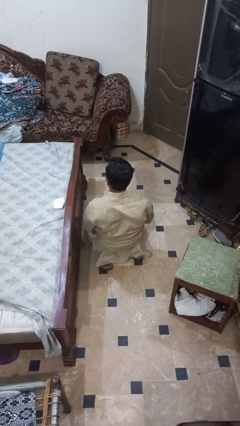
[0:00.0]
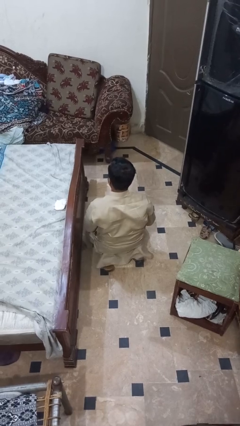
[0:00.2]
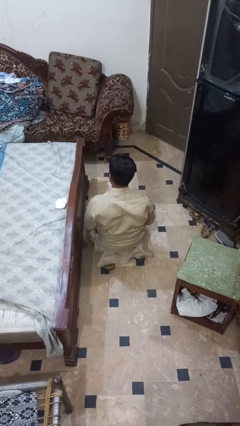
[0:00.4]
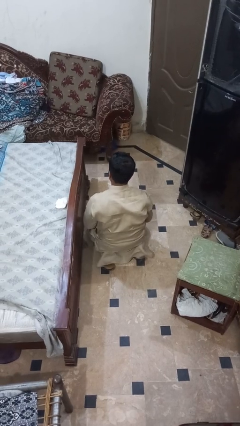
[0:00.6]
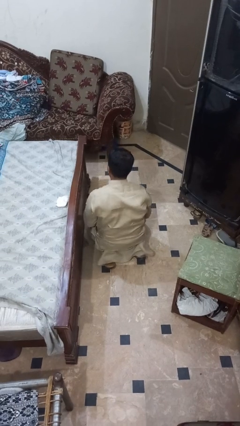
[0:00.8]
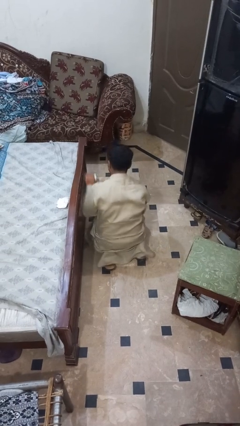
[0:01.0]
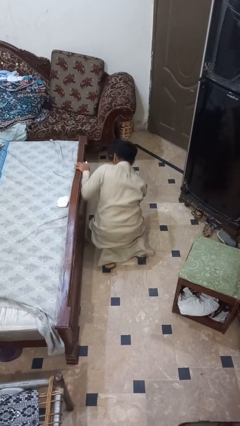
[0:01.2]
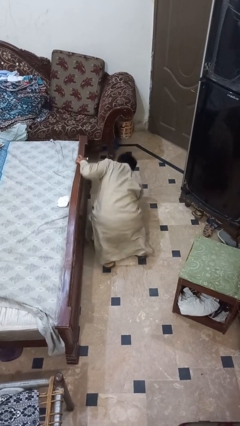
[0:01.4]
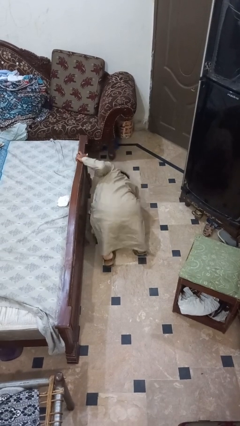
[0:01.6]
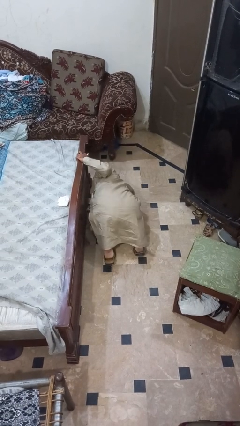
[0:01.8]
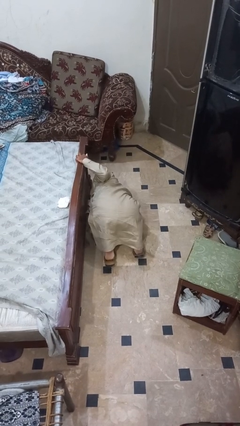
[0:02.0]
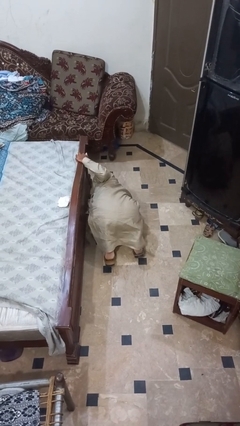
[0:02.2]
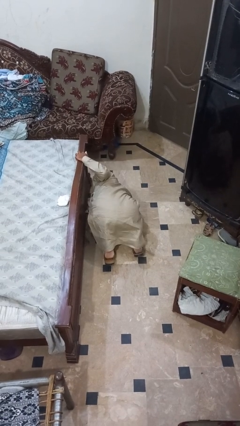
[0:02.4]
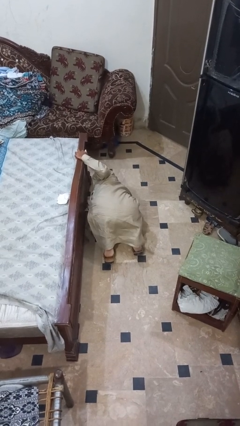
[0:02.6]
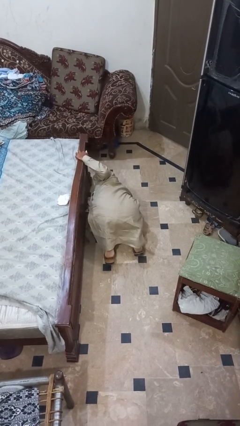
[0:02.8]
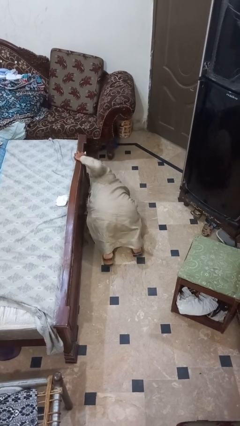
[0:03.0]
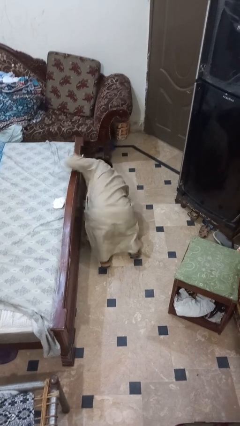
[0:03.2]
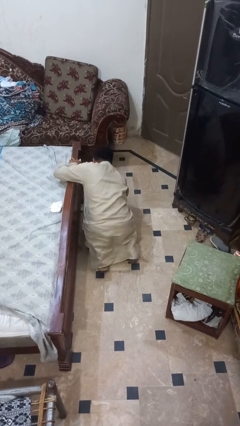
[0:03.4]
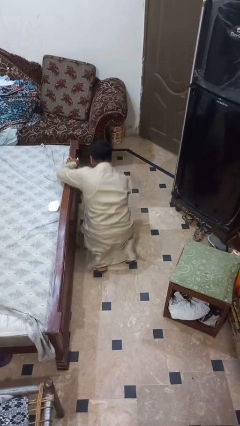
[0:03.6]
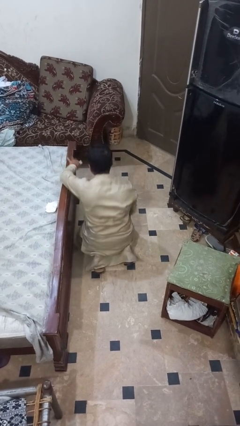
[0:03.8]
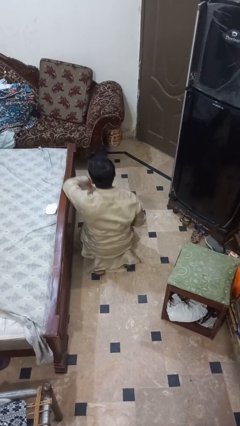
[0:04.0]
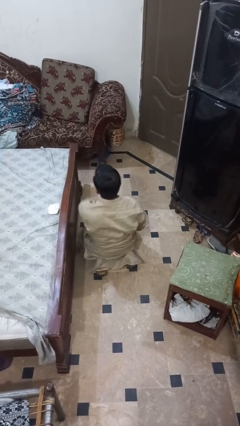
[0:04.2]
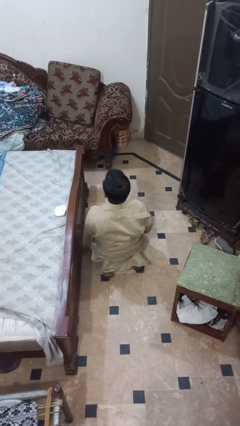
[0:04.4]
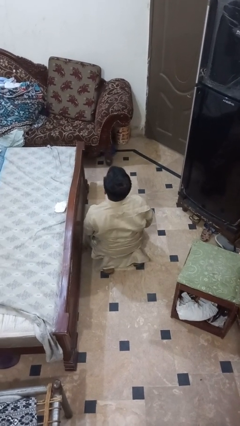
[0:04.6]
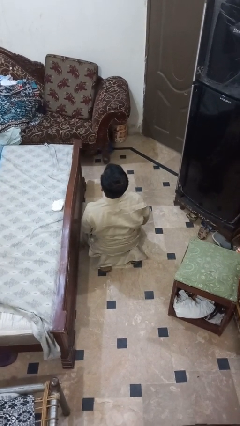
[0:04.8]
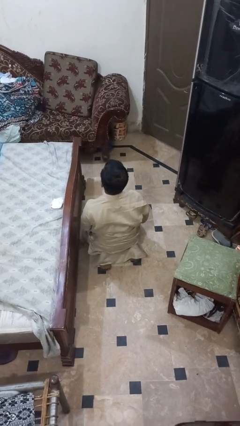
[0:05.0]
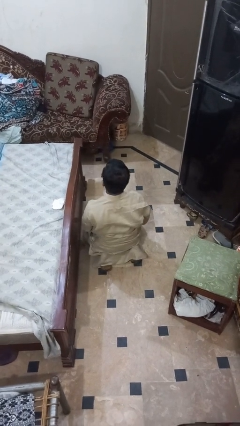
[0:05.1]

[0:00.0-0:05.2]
person searches under bed

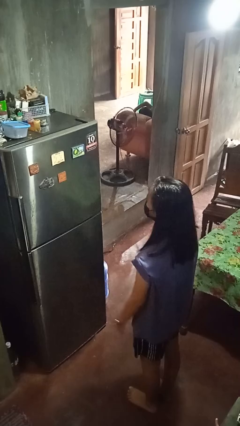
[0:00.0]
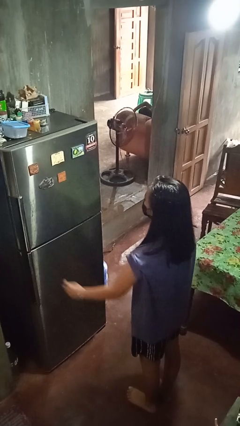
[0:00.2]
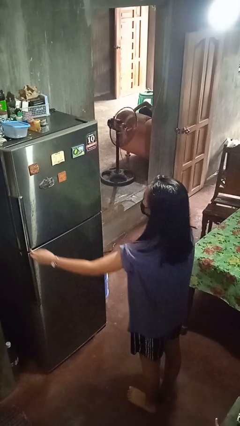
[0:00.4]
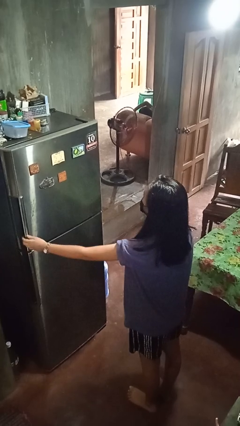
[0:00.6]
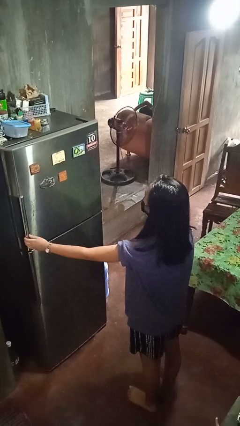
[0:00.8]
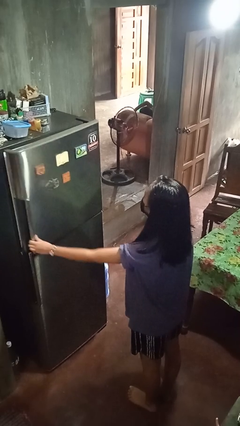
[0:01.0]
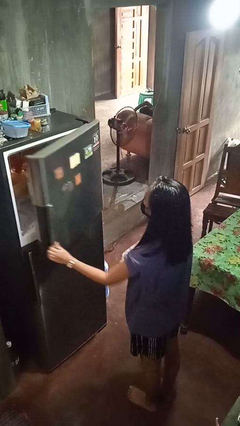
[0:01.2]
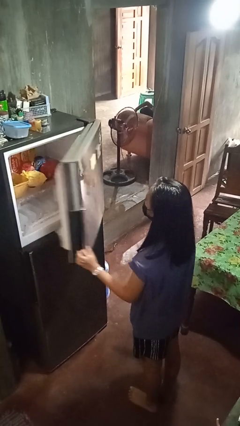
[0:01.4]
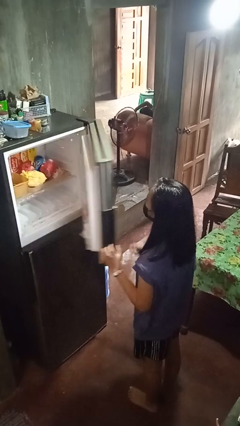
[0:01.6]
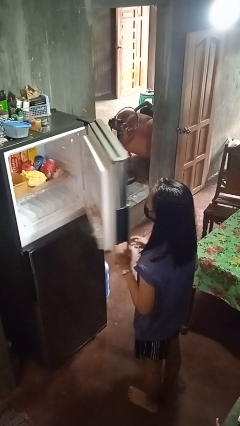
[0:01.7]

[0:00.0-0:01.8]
person opens refrigerator

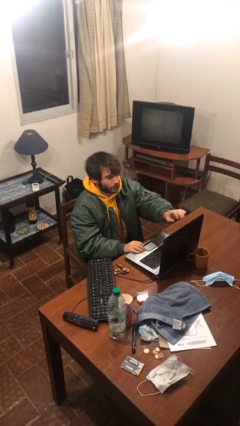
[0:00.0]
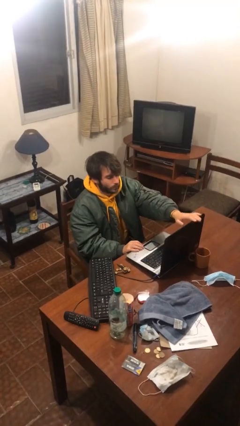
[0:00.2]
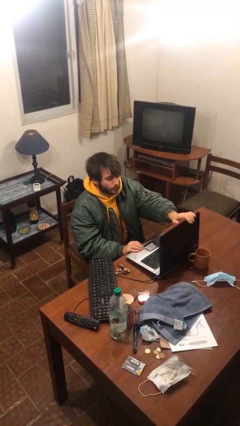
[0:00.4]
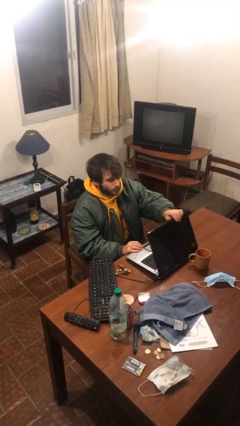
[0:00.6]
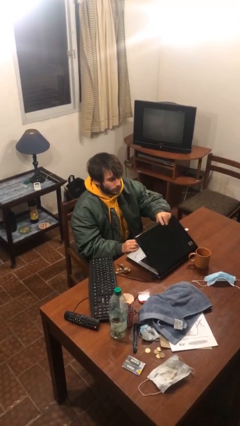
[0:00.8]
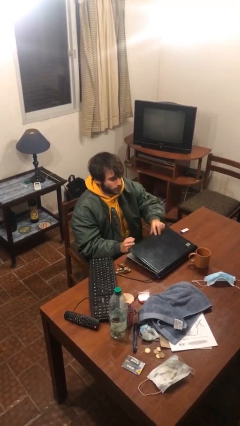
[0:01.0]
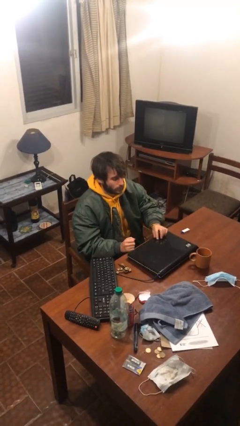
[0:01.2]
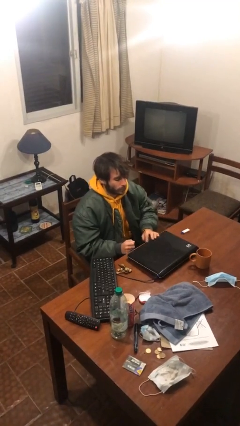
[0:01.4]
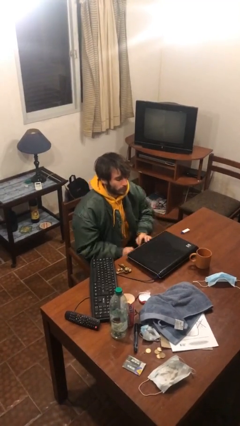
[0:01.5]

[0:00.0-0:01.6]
person interacts with laptop

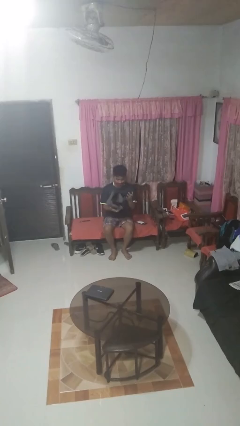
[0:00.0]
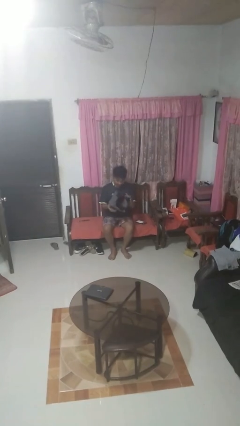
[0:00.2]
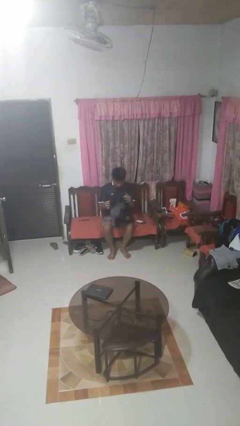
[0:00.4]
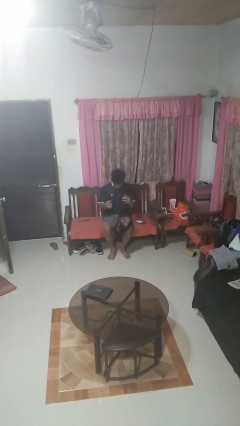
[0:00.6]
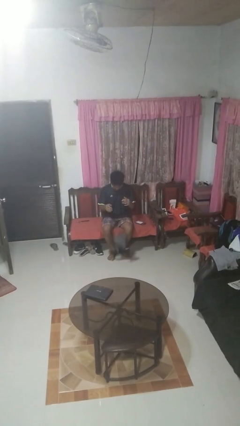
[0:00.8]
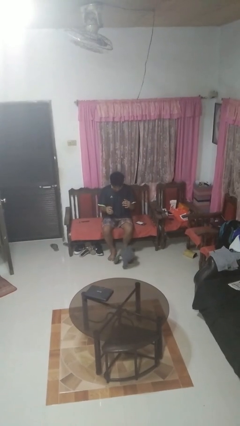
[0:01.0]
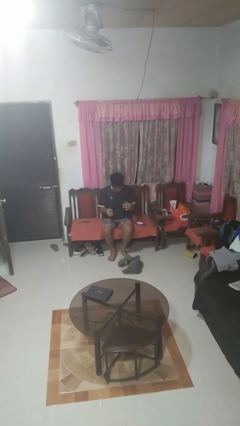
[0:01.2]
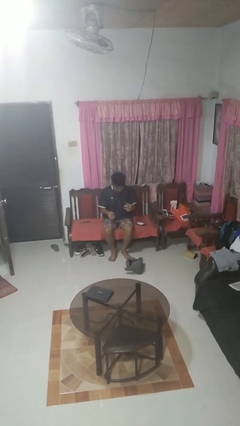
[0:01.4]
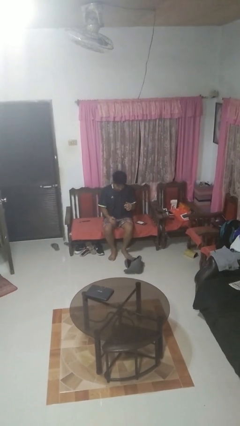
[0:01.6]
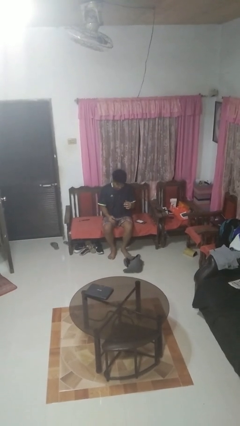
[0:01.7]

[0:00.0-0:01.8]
person drops object

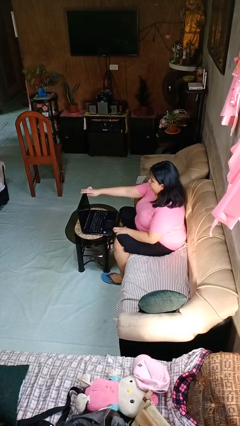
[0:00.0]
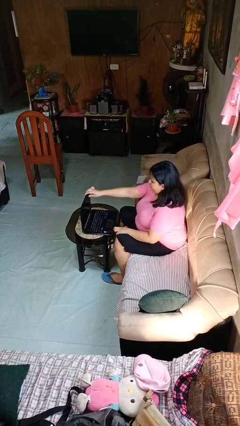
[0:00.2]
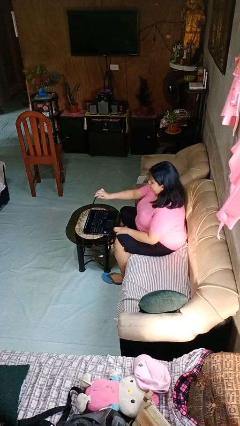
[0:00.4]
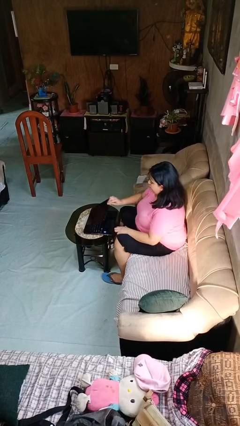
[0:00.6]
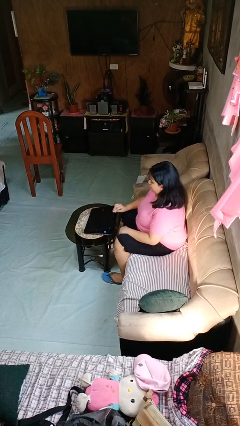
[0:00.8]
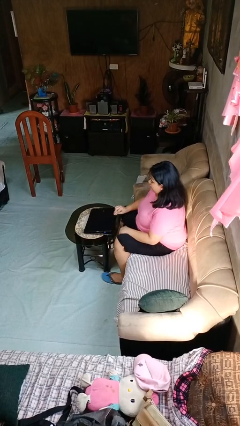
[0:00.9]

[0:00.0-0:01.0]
person closes laptop

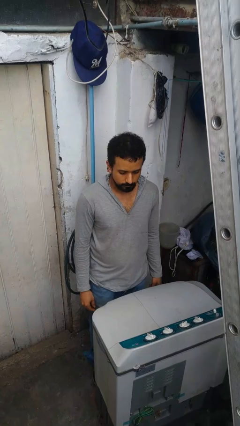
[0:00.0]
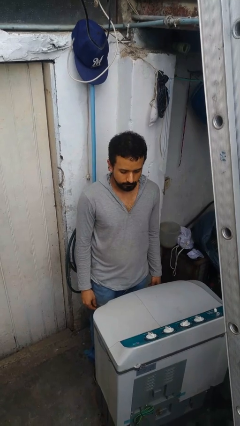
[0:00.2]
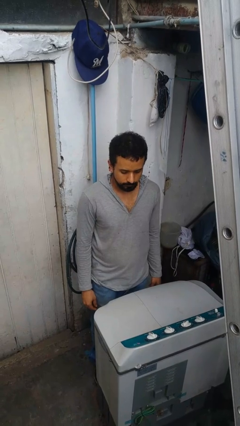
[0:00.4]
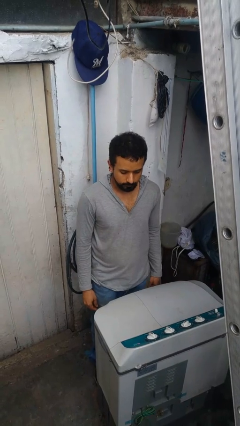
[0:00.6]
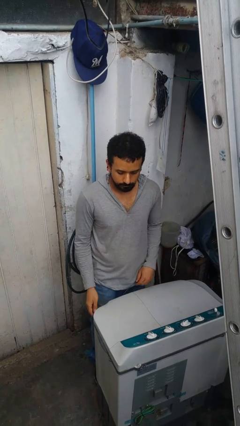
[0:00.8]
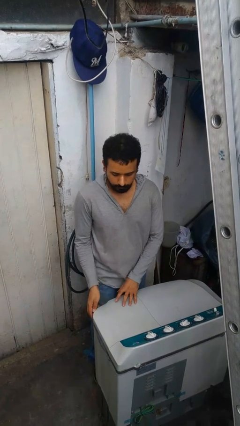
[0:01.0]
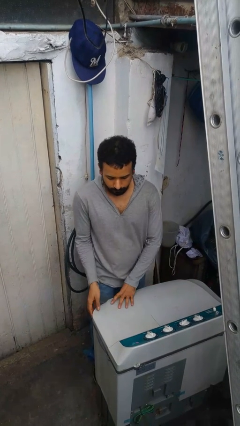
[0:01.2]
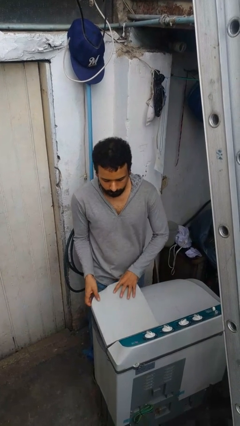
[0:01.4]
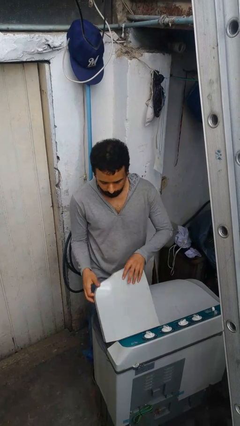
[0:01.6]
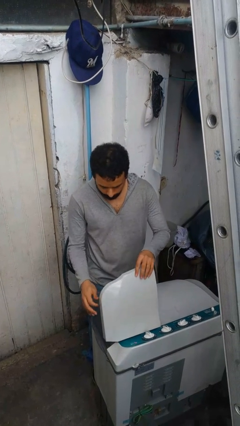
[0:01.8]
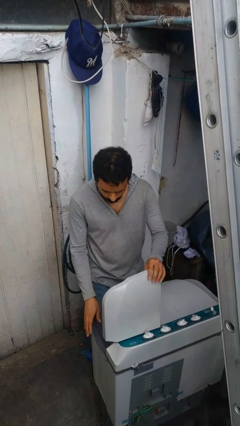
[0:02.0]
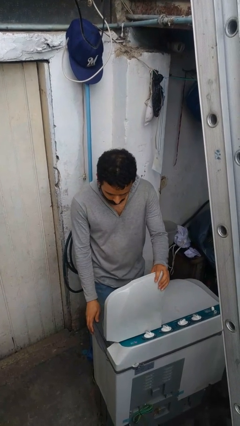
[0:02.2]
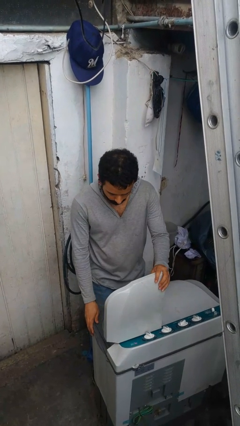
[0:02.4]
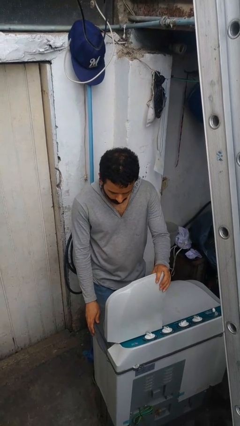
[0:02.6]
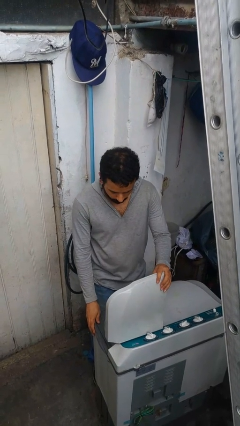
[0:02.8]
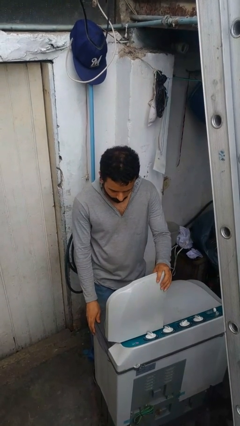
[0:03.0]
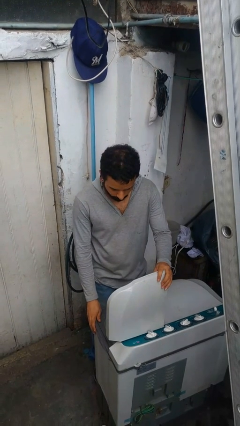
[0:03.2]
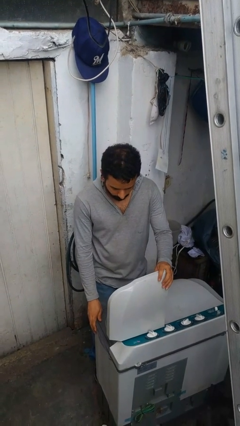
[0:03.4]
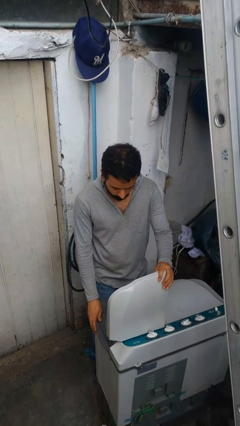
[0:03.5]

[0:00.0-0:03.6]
person opens clothes washer

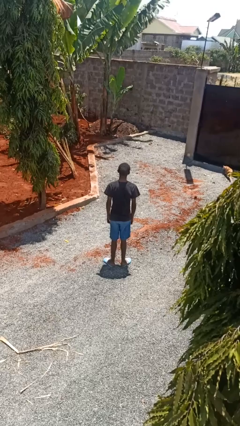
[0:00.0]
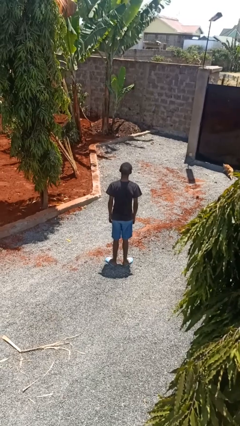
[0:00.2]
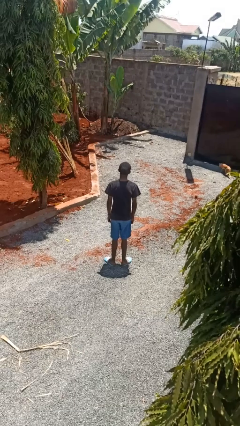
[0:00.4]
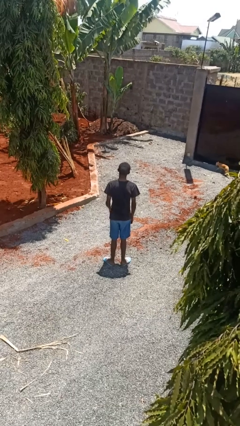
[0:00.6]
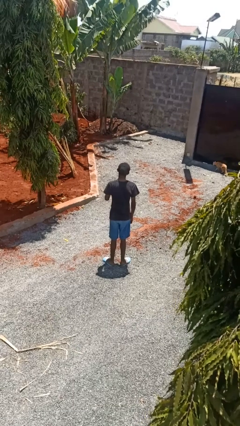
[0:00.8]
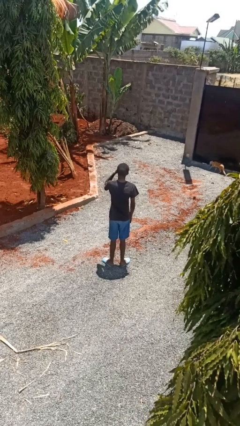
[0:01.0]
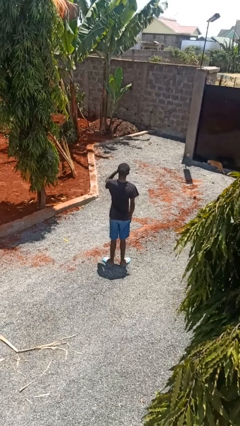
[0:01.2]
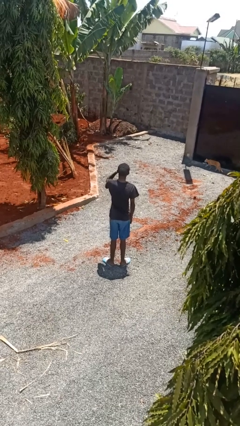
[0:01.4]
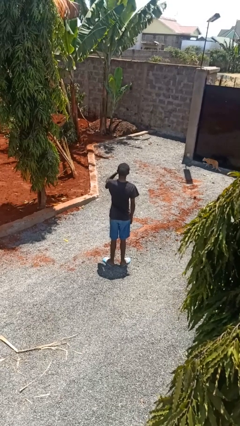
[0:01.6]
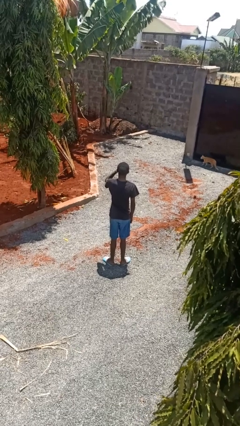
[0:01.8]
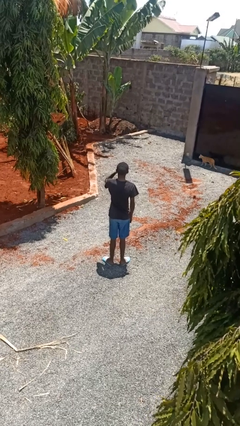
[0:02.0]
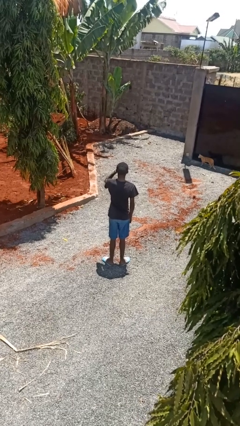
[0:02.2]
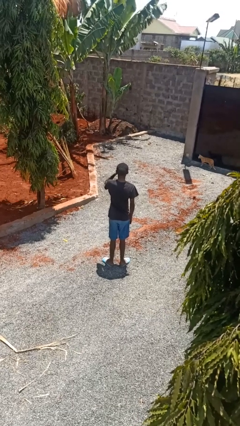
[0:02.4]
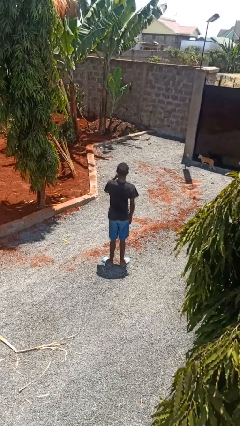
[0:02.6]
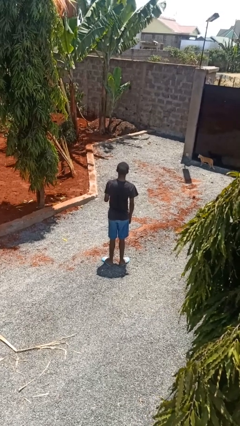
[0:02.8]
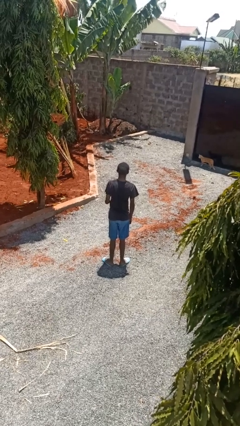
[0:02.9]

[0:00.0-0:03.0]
person rubs eyes
